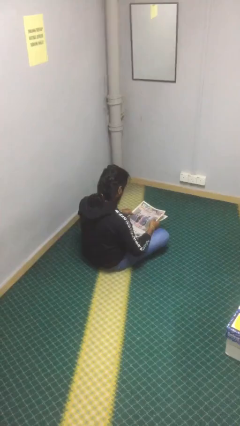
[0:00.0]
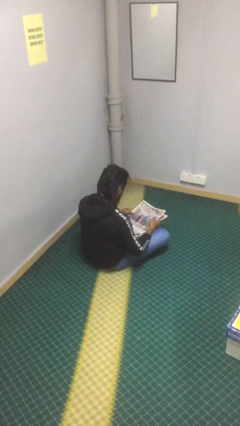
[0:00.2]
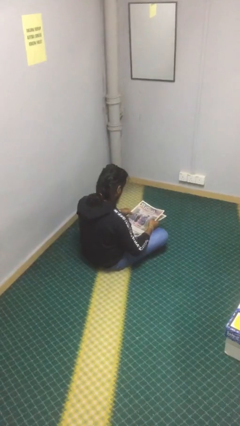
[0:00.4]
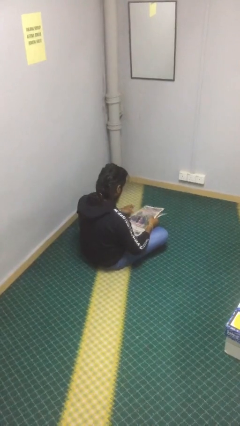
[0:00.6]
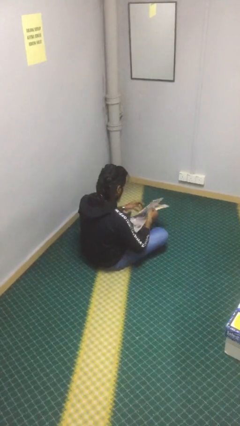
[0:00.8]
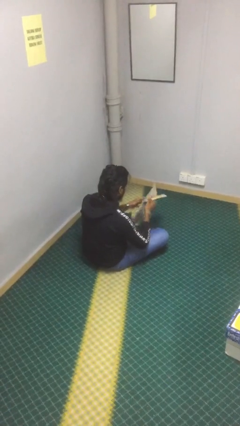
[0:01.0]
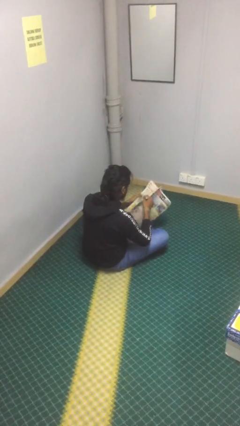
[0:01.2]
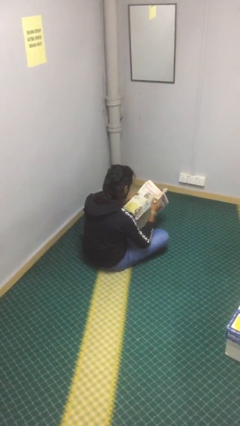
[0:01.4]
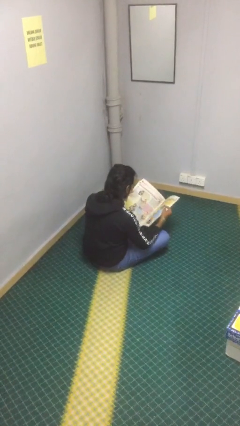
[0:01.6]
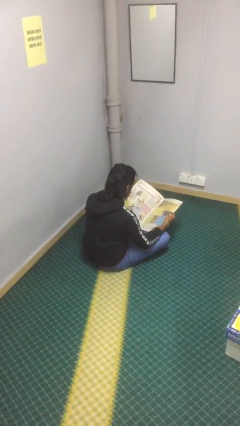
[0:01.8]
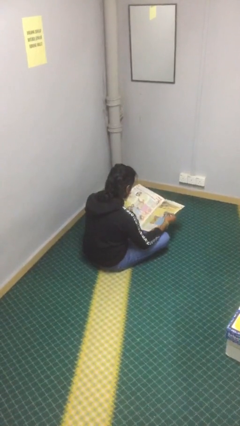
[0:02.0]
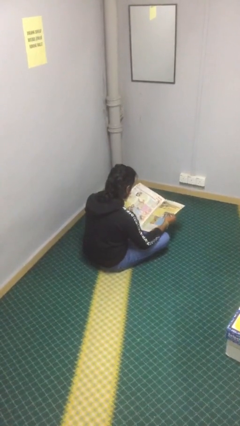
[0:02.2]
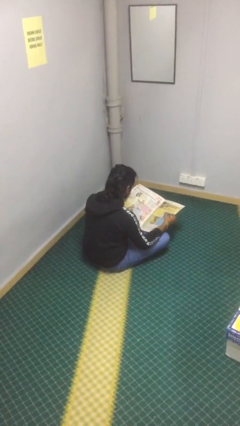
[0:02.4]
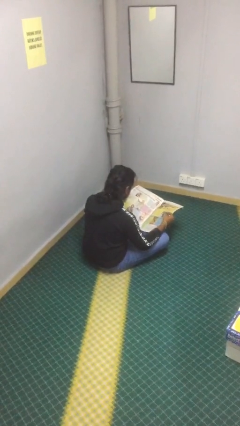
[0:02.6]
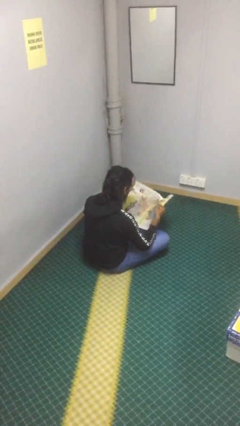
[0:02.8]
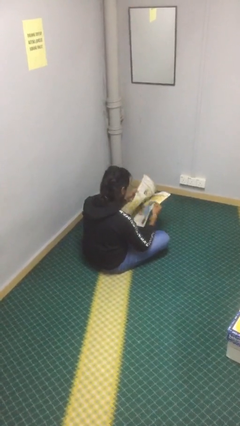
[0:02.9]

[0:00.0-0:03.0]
person reads newspaper

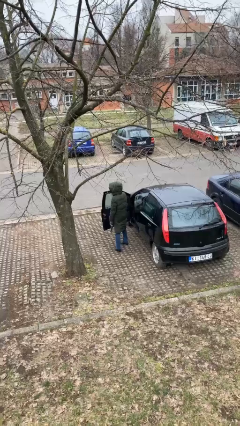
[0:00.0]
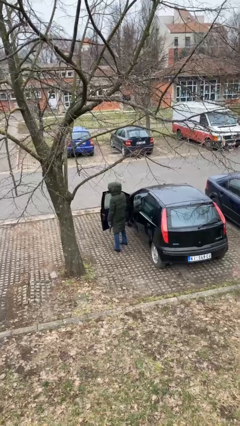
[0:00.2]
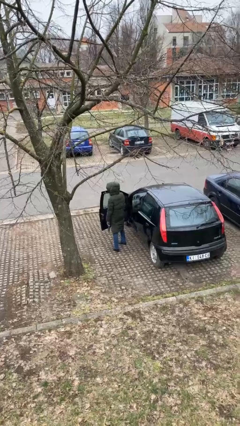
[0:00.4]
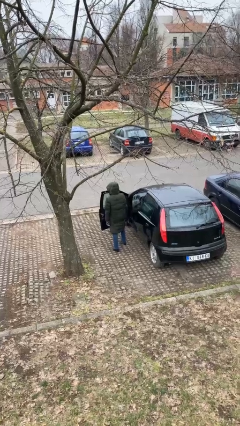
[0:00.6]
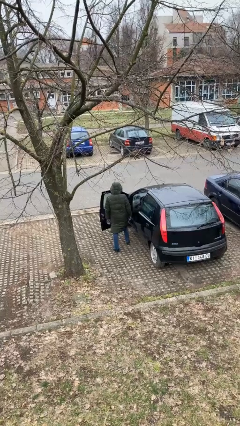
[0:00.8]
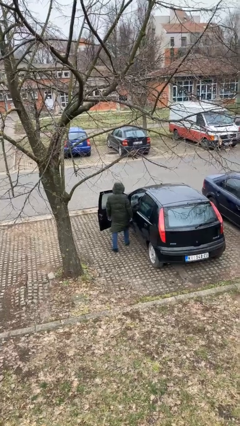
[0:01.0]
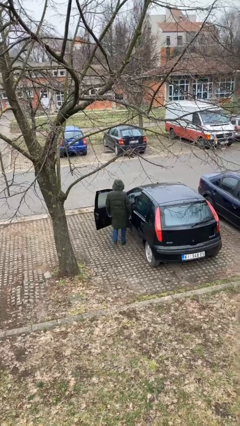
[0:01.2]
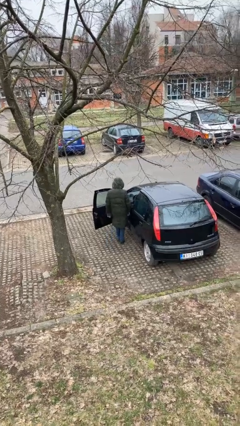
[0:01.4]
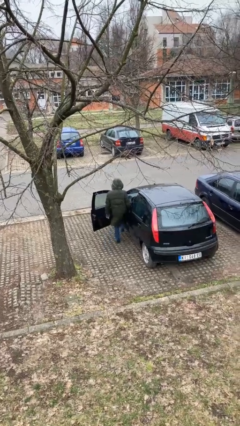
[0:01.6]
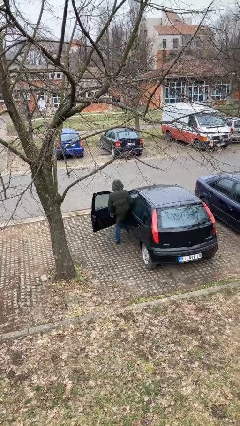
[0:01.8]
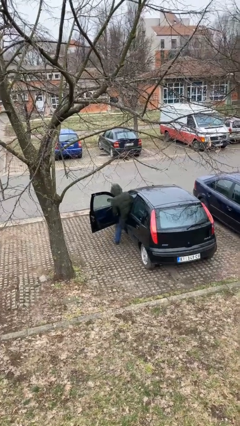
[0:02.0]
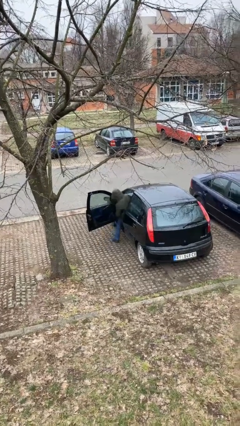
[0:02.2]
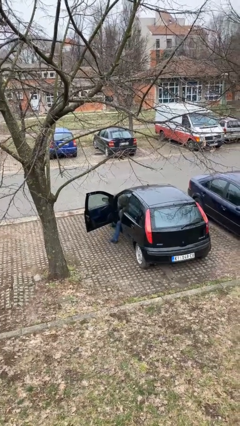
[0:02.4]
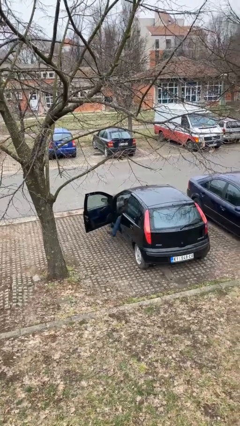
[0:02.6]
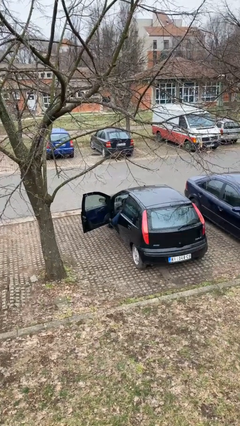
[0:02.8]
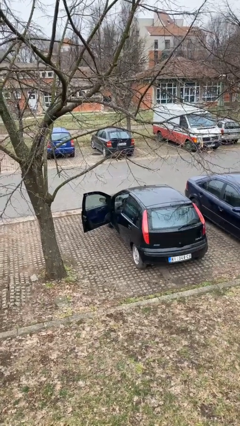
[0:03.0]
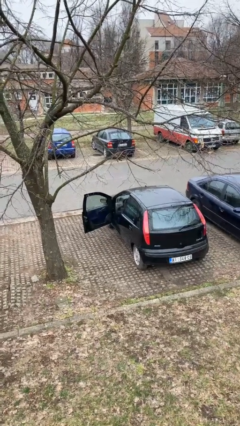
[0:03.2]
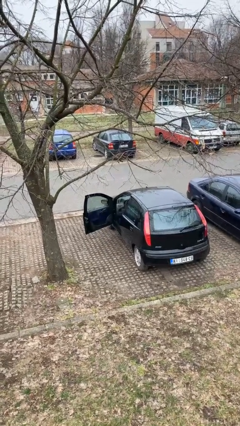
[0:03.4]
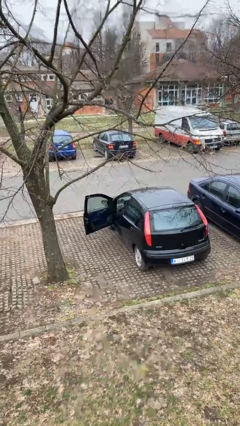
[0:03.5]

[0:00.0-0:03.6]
person enters car

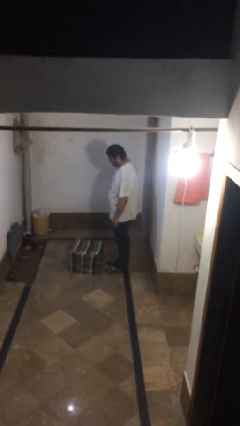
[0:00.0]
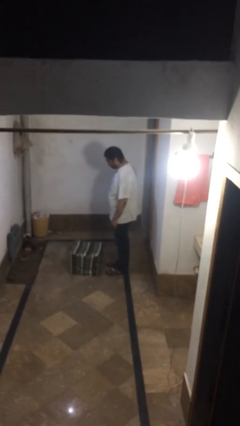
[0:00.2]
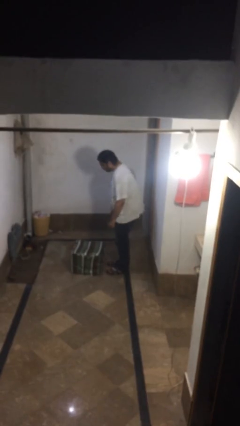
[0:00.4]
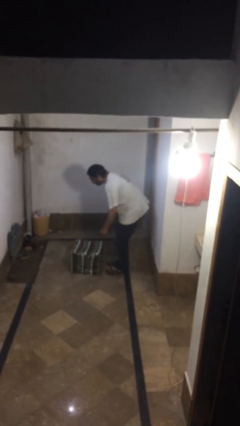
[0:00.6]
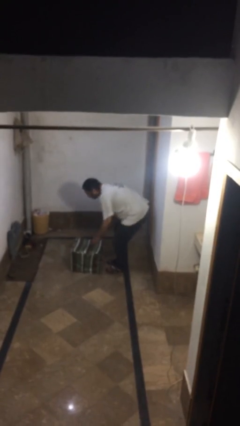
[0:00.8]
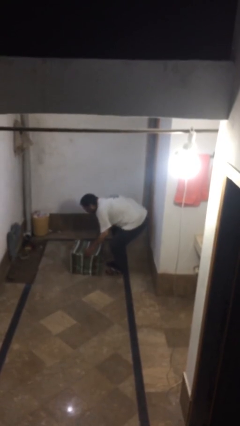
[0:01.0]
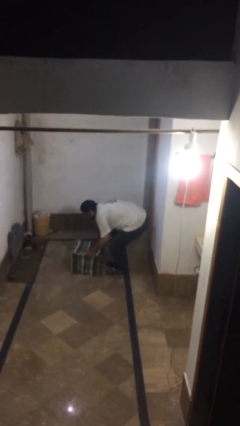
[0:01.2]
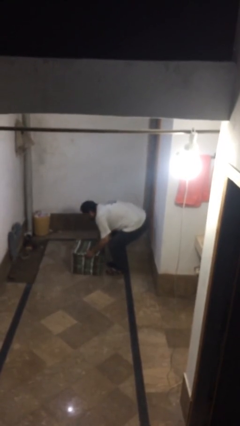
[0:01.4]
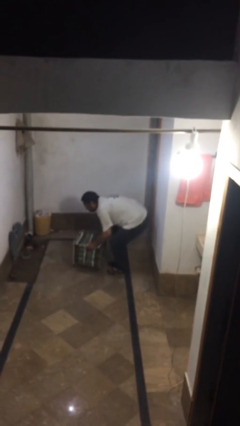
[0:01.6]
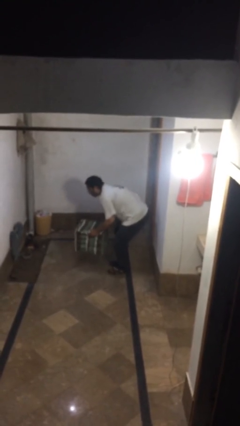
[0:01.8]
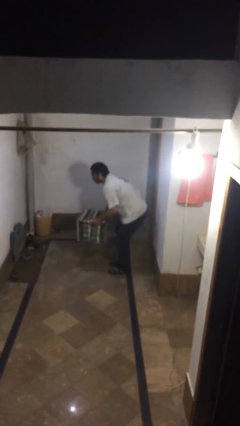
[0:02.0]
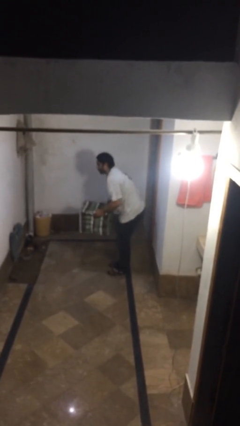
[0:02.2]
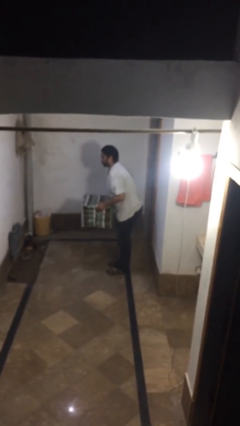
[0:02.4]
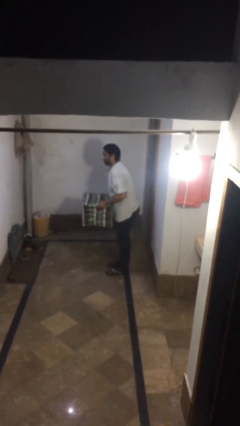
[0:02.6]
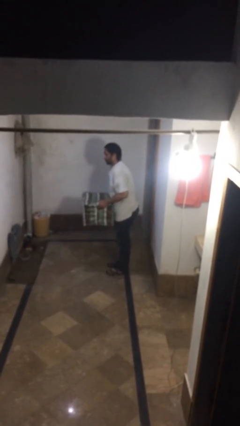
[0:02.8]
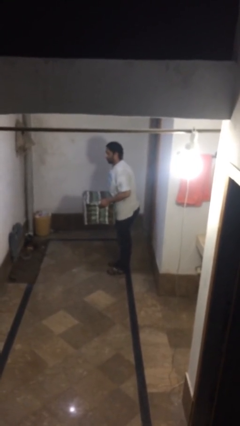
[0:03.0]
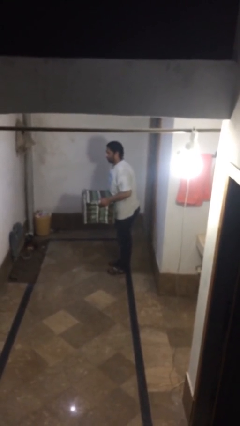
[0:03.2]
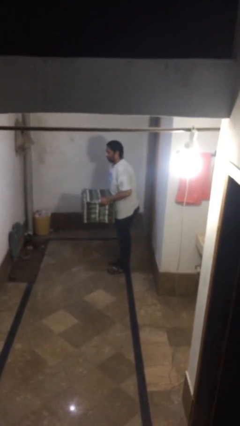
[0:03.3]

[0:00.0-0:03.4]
person picks up object from floor

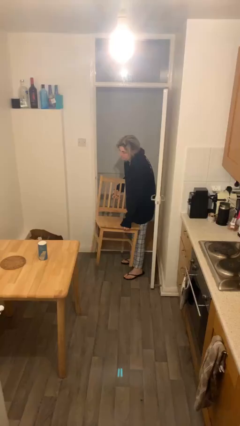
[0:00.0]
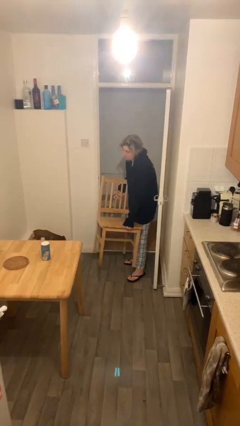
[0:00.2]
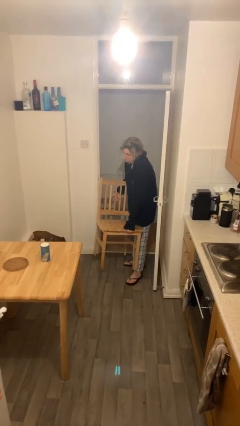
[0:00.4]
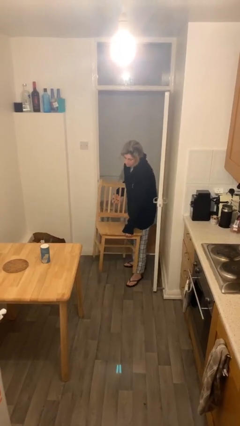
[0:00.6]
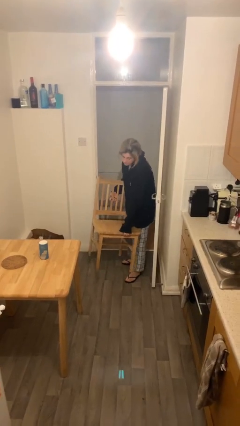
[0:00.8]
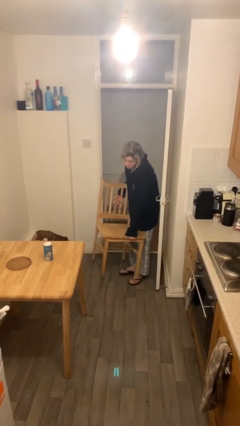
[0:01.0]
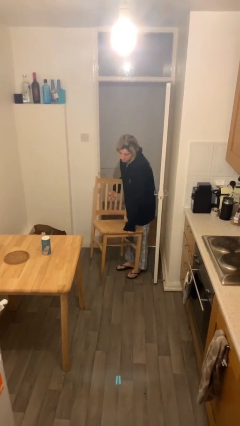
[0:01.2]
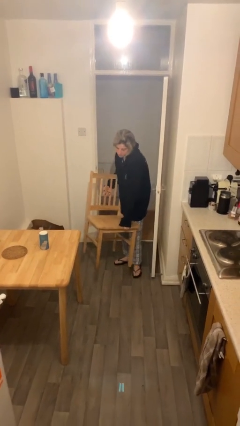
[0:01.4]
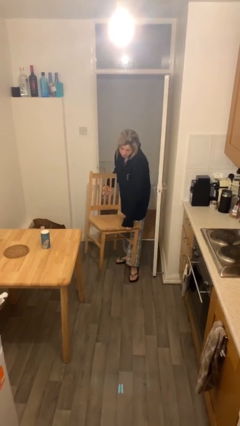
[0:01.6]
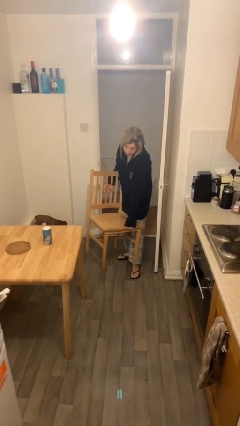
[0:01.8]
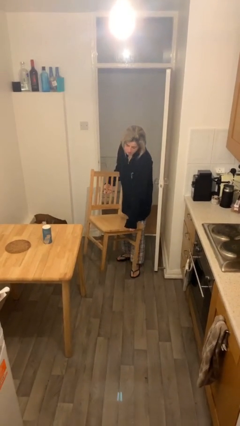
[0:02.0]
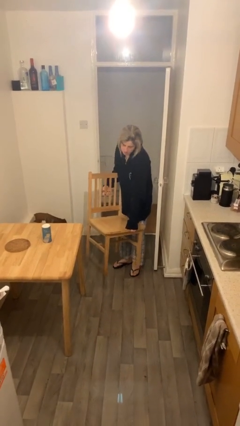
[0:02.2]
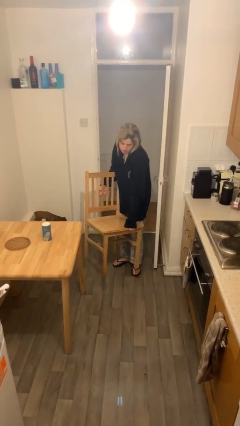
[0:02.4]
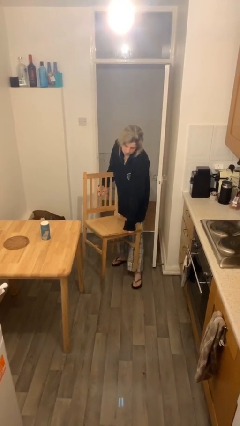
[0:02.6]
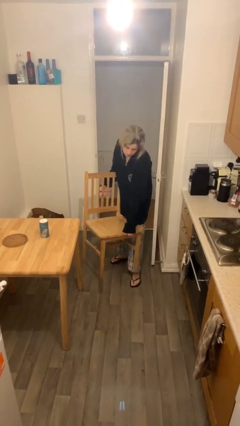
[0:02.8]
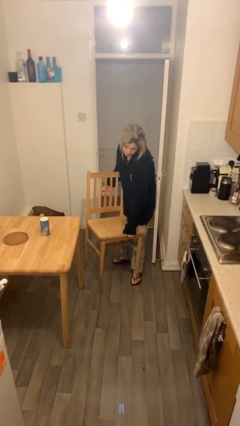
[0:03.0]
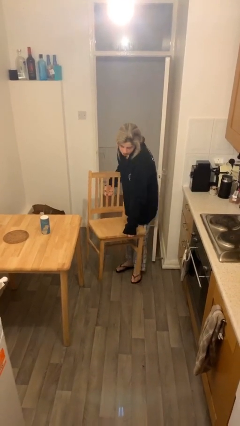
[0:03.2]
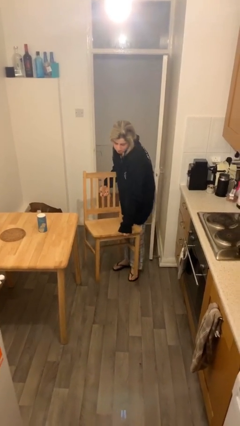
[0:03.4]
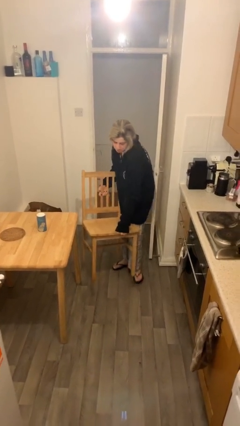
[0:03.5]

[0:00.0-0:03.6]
person carries heavy object

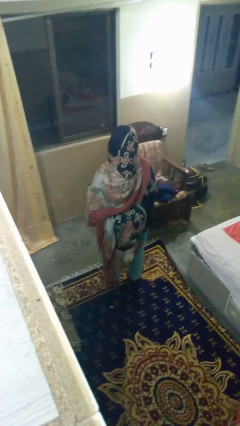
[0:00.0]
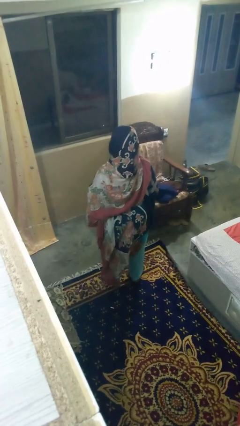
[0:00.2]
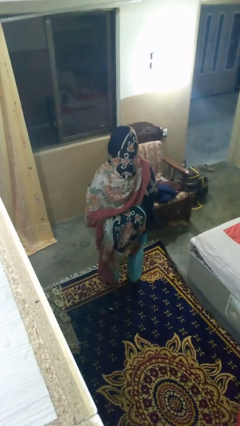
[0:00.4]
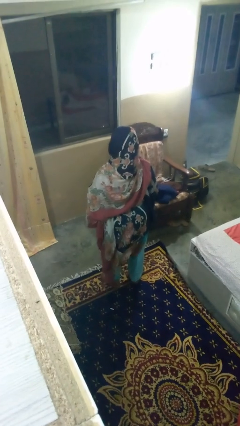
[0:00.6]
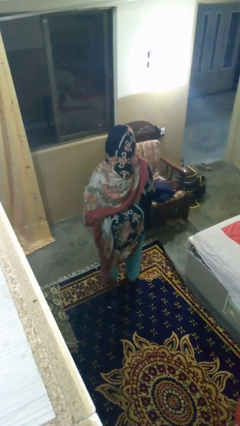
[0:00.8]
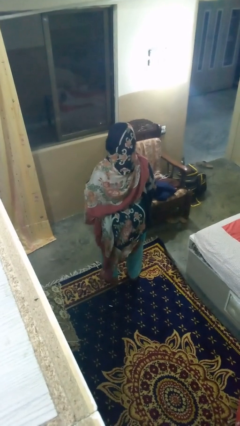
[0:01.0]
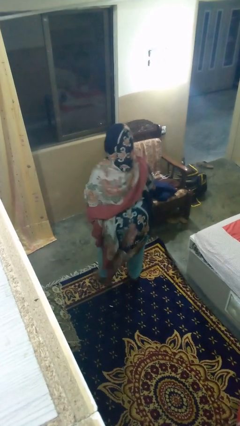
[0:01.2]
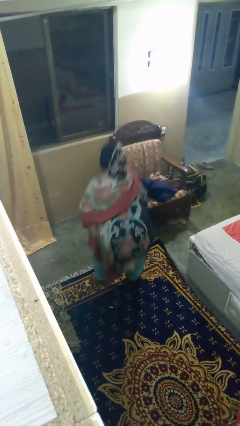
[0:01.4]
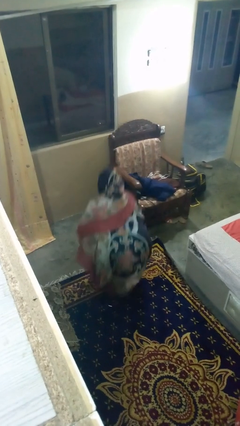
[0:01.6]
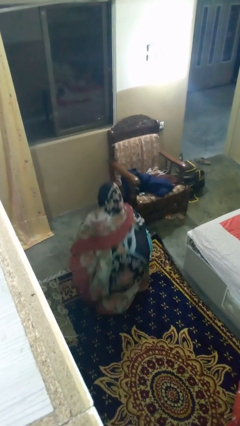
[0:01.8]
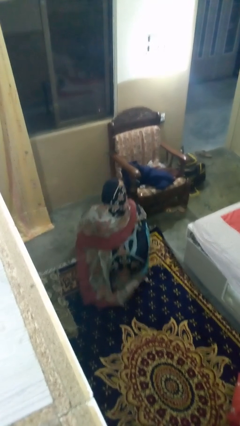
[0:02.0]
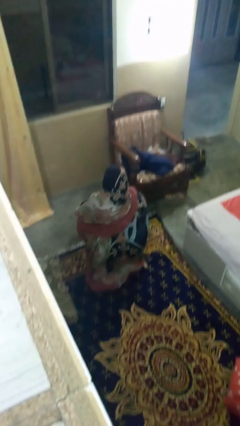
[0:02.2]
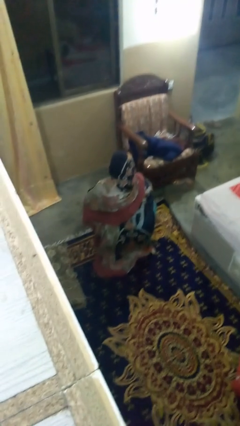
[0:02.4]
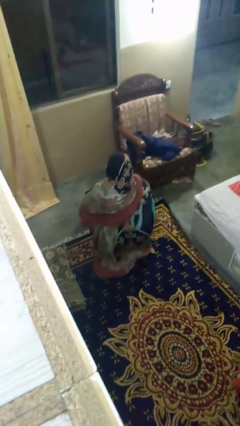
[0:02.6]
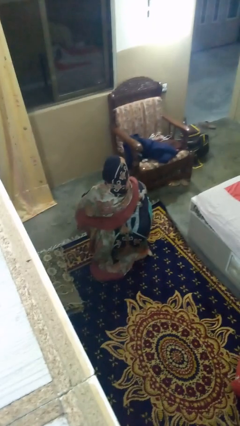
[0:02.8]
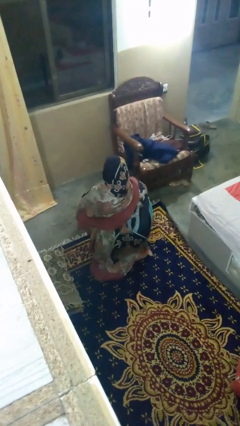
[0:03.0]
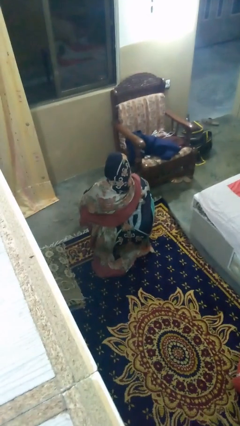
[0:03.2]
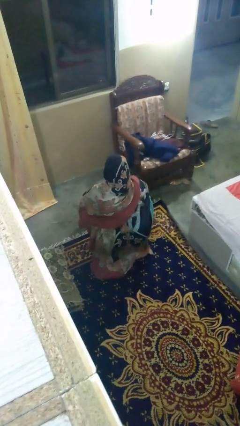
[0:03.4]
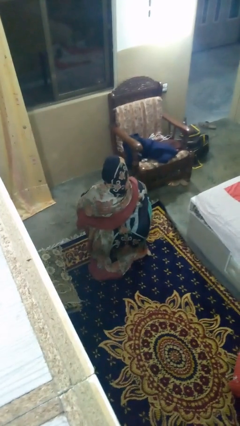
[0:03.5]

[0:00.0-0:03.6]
person squats
